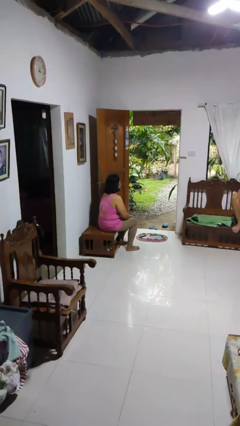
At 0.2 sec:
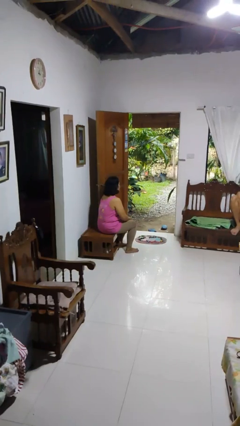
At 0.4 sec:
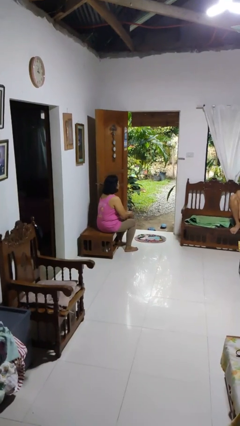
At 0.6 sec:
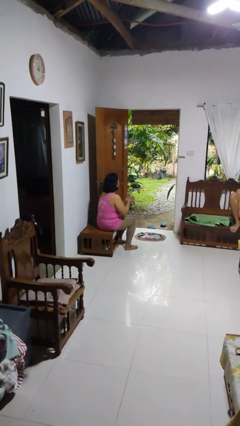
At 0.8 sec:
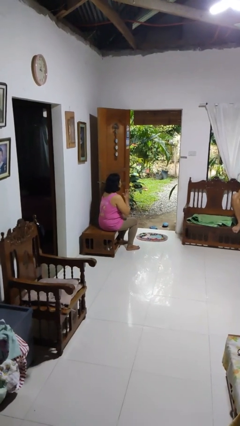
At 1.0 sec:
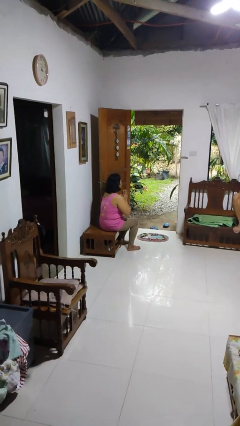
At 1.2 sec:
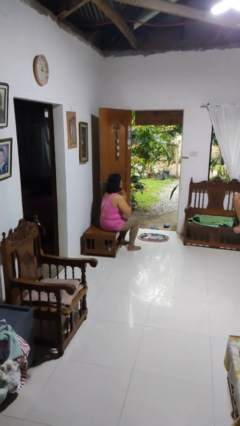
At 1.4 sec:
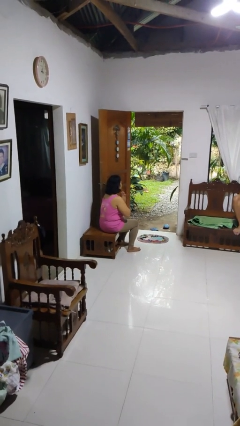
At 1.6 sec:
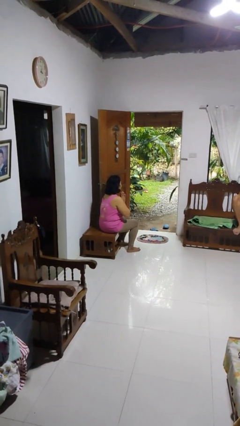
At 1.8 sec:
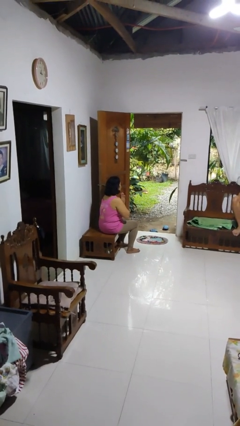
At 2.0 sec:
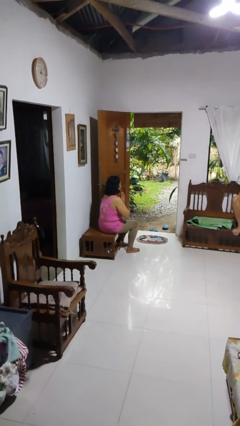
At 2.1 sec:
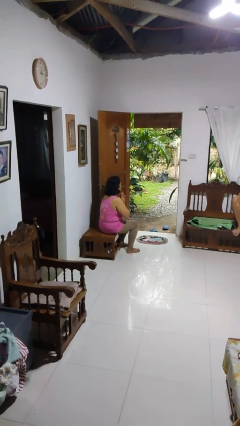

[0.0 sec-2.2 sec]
person prays

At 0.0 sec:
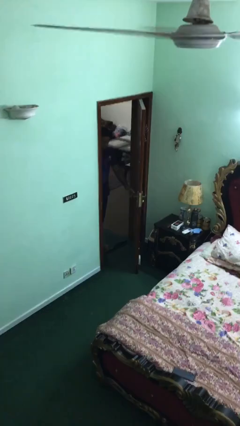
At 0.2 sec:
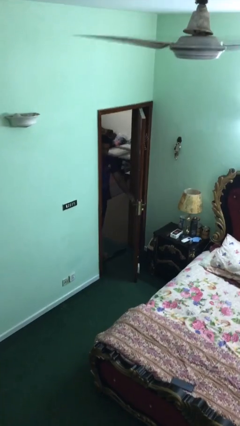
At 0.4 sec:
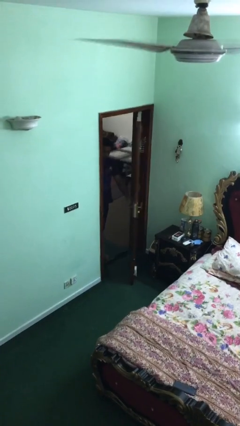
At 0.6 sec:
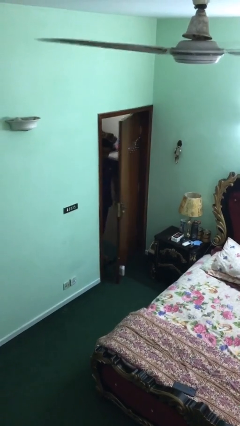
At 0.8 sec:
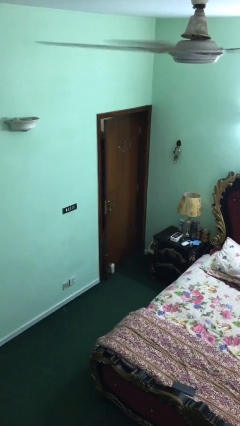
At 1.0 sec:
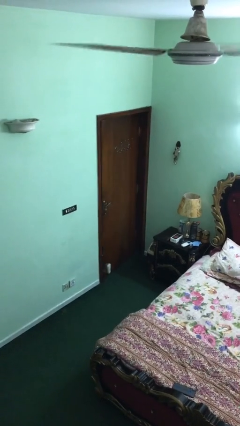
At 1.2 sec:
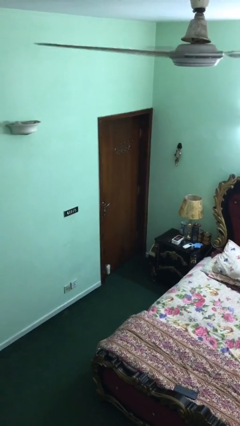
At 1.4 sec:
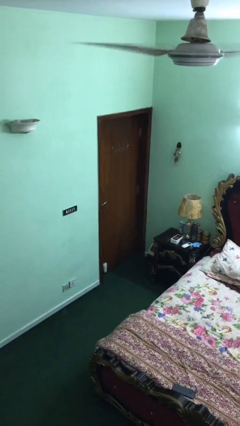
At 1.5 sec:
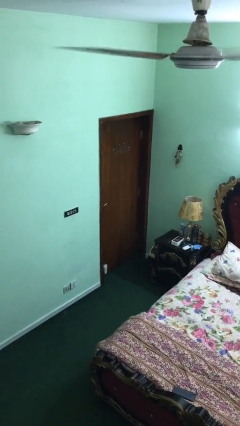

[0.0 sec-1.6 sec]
person closes facility door

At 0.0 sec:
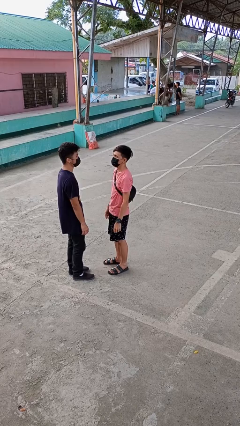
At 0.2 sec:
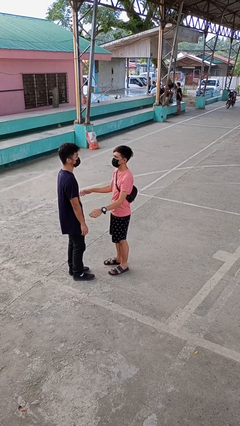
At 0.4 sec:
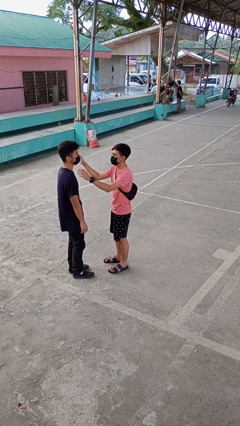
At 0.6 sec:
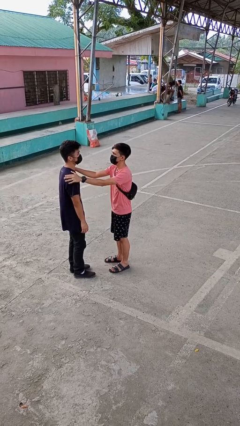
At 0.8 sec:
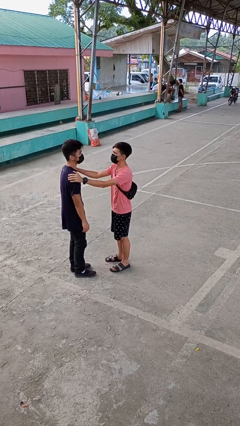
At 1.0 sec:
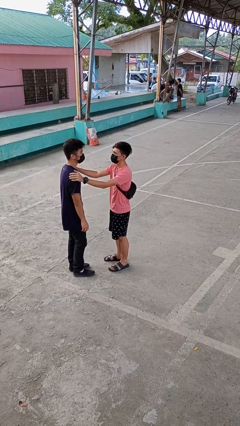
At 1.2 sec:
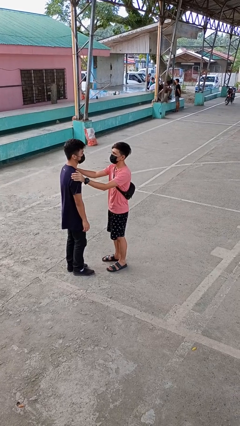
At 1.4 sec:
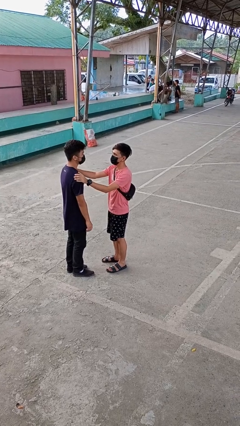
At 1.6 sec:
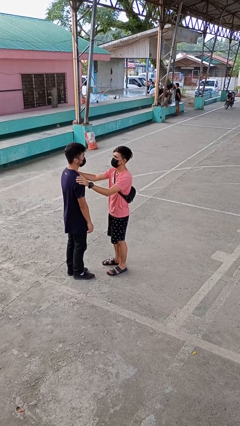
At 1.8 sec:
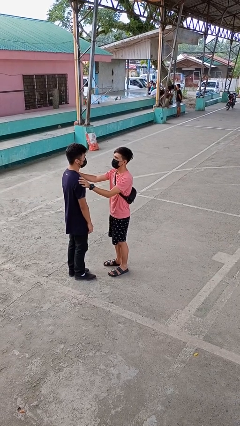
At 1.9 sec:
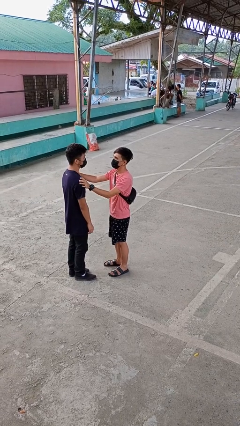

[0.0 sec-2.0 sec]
person grabs person by shoulder

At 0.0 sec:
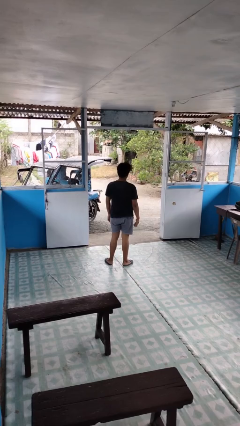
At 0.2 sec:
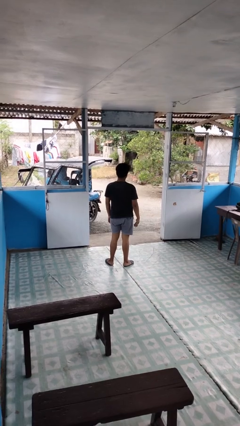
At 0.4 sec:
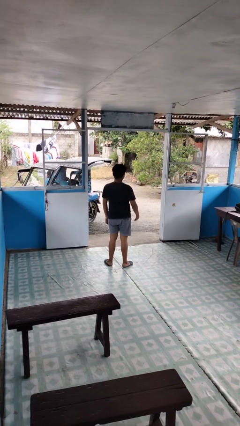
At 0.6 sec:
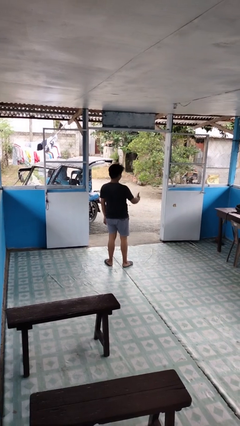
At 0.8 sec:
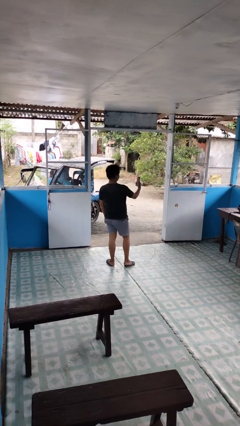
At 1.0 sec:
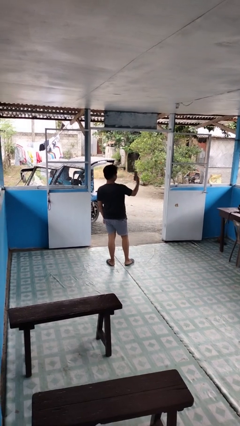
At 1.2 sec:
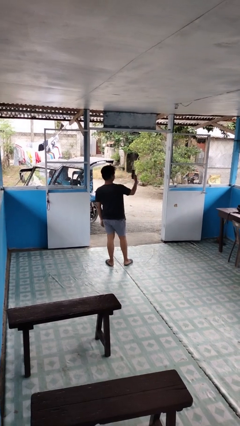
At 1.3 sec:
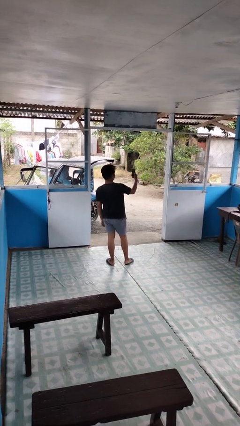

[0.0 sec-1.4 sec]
person takes selfie

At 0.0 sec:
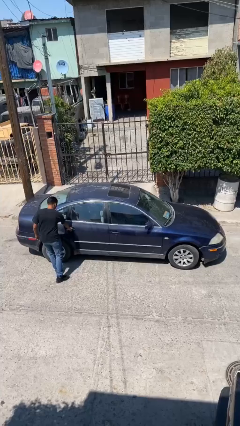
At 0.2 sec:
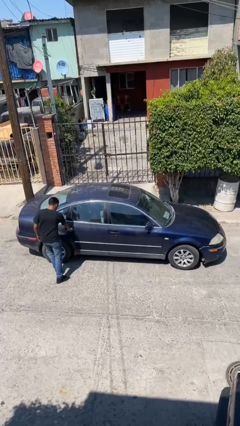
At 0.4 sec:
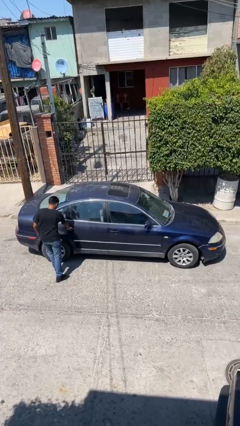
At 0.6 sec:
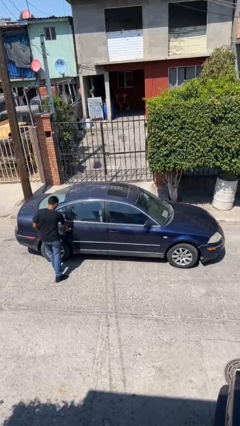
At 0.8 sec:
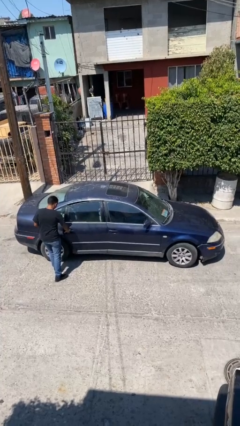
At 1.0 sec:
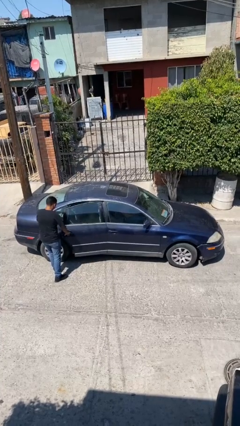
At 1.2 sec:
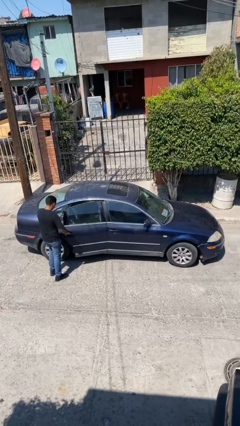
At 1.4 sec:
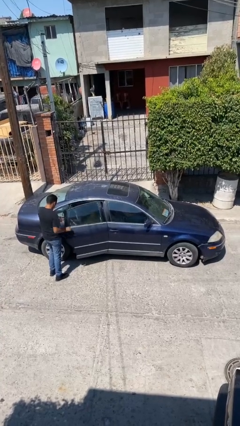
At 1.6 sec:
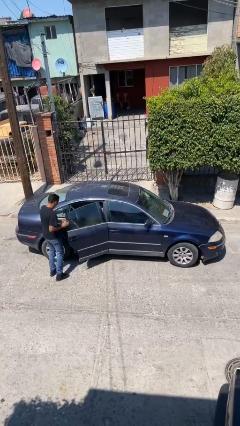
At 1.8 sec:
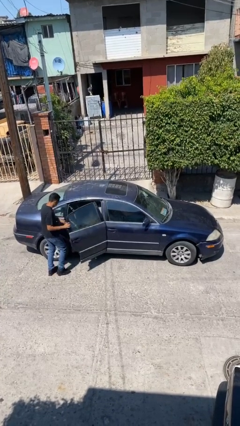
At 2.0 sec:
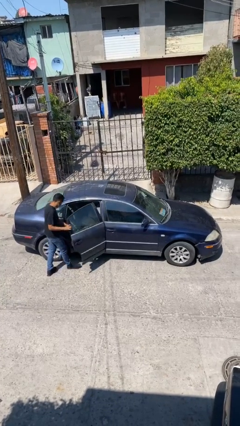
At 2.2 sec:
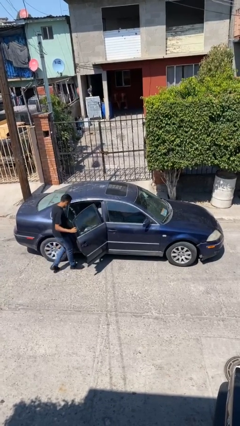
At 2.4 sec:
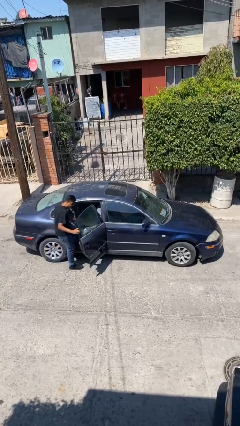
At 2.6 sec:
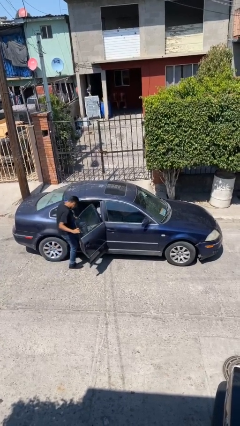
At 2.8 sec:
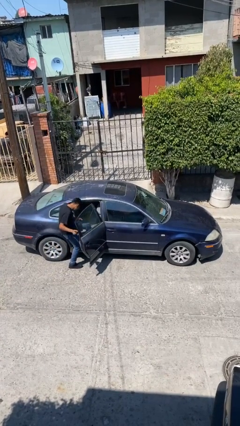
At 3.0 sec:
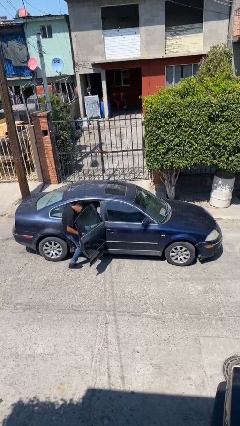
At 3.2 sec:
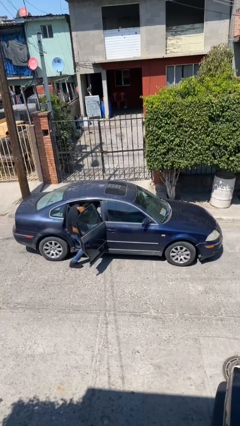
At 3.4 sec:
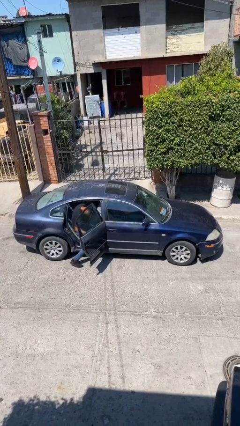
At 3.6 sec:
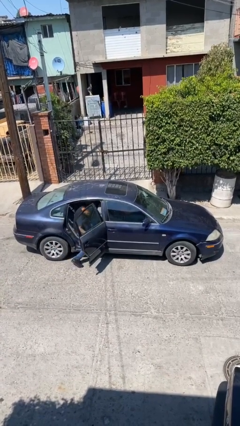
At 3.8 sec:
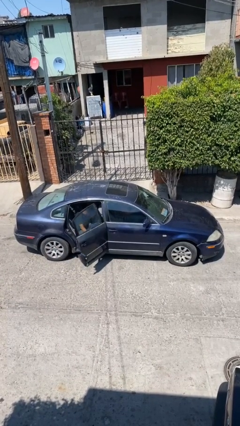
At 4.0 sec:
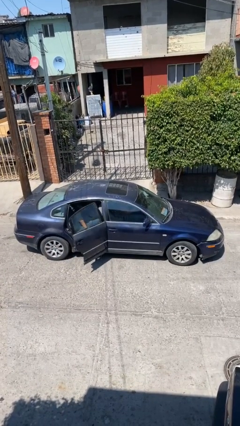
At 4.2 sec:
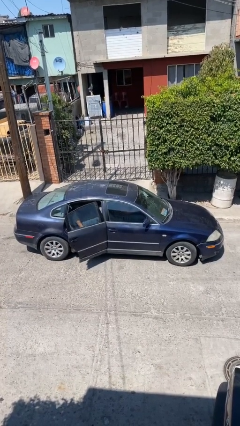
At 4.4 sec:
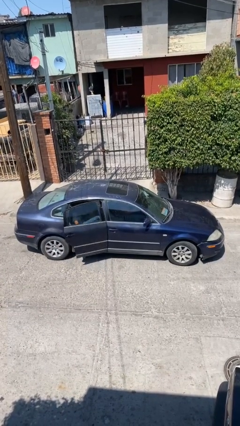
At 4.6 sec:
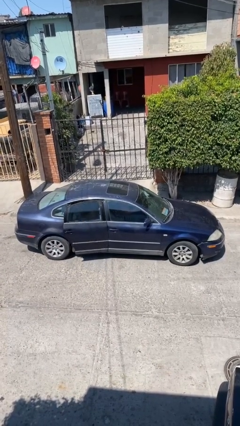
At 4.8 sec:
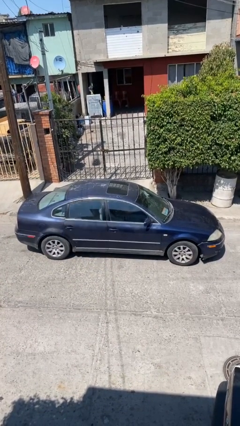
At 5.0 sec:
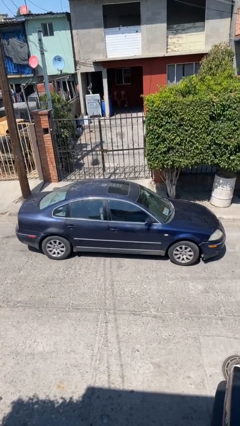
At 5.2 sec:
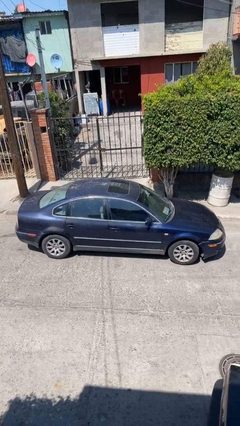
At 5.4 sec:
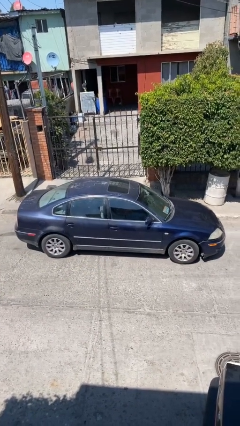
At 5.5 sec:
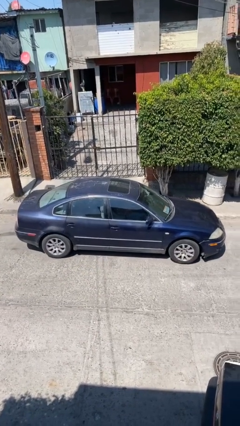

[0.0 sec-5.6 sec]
car picks up person

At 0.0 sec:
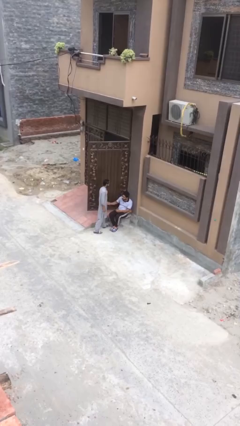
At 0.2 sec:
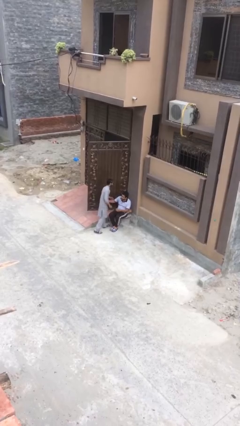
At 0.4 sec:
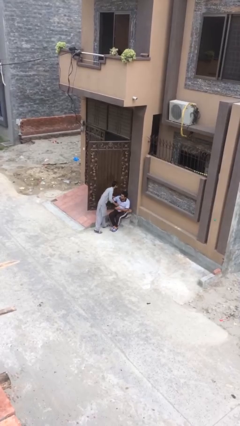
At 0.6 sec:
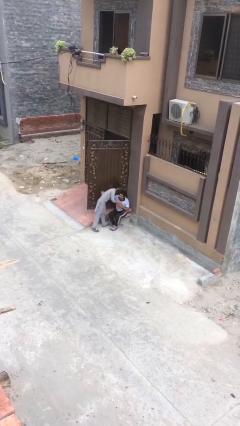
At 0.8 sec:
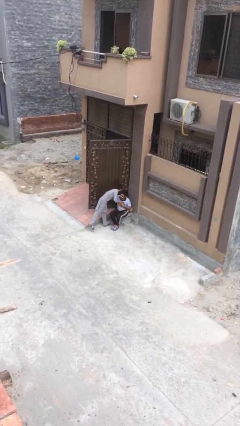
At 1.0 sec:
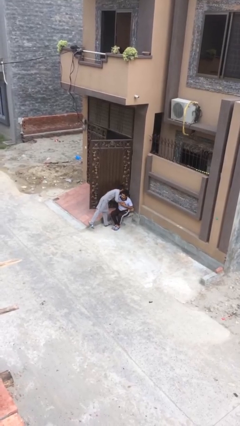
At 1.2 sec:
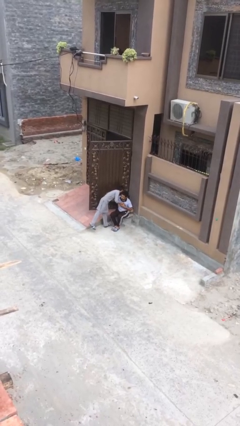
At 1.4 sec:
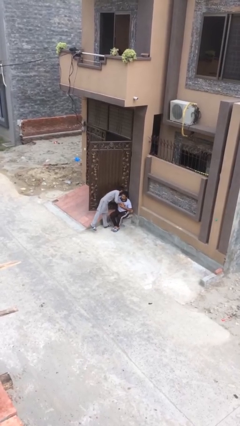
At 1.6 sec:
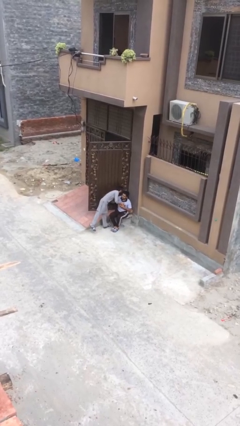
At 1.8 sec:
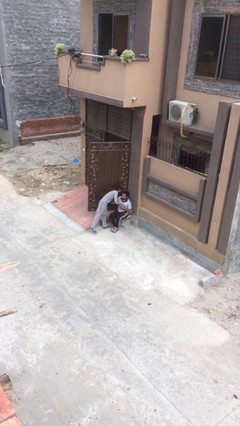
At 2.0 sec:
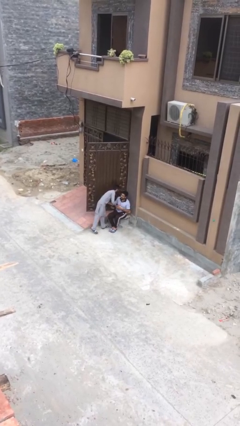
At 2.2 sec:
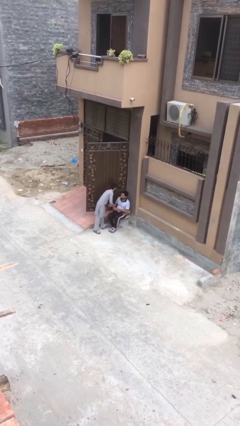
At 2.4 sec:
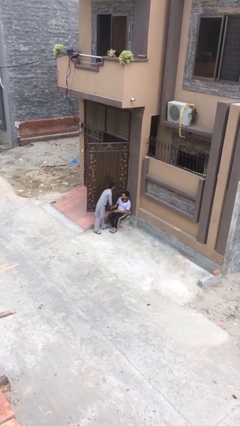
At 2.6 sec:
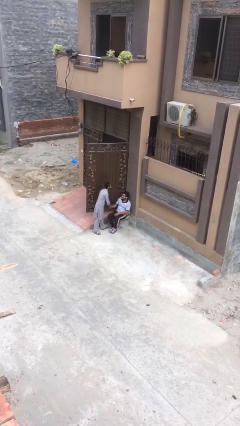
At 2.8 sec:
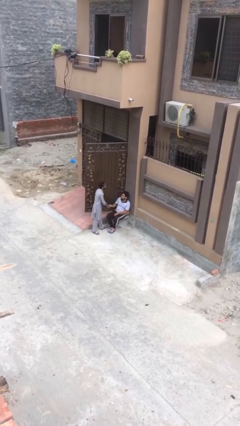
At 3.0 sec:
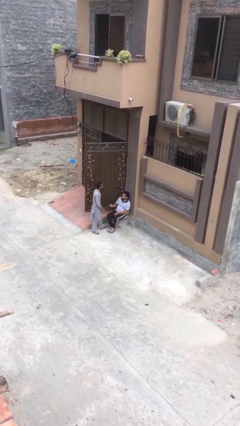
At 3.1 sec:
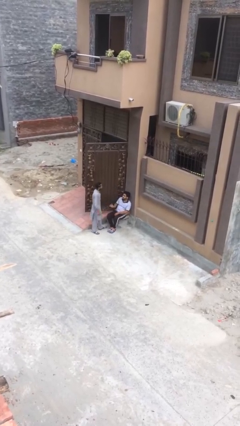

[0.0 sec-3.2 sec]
person embraces person

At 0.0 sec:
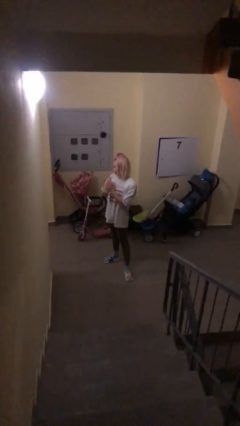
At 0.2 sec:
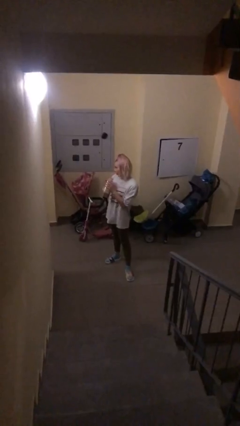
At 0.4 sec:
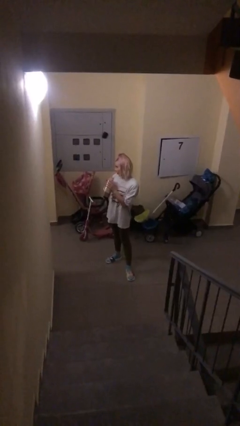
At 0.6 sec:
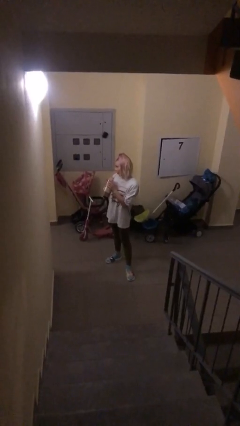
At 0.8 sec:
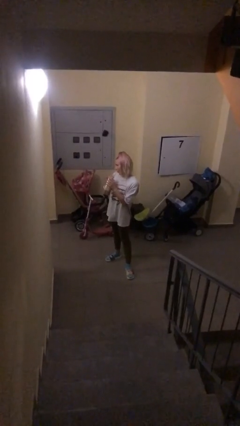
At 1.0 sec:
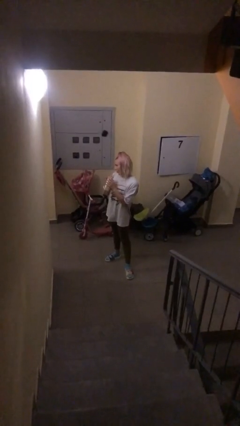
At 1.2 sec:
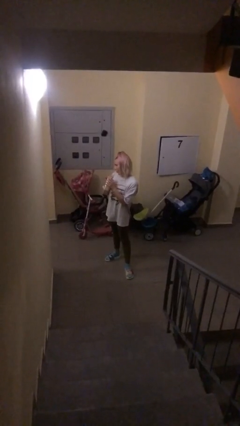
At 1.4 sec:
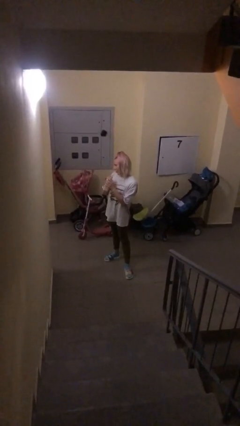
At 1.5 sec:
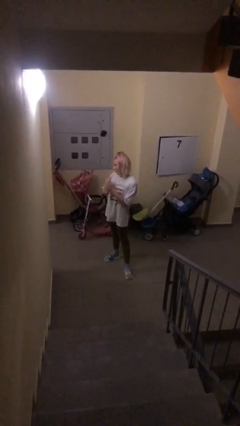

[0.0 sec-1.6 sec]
person drinks from straw
